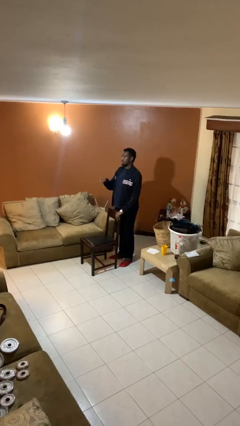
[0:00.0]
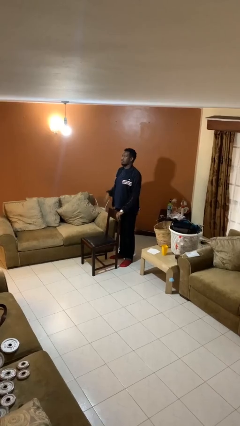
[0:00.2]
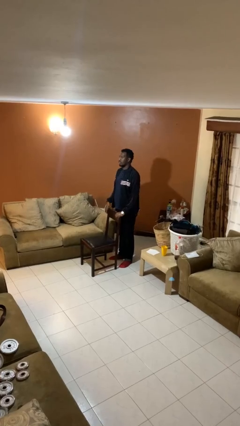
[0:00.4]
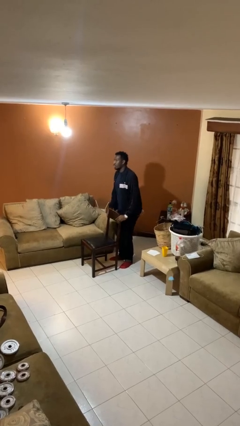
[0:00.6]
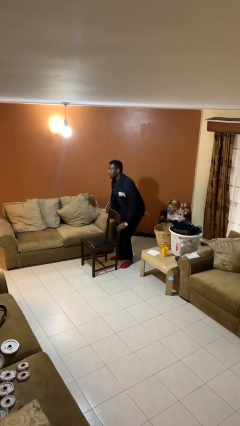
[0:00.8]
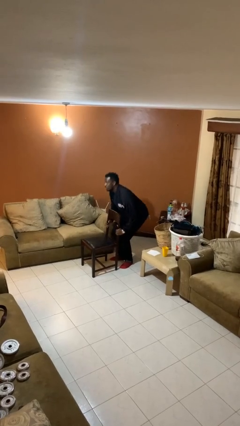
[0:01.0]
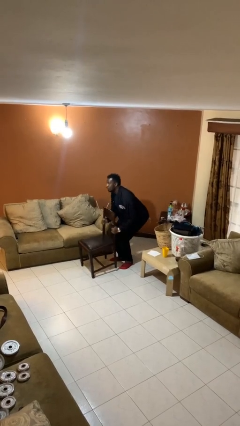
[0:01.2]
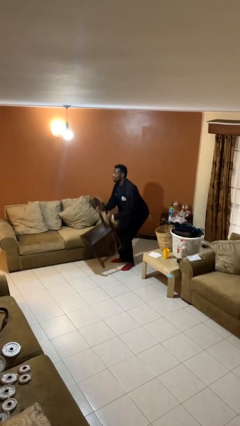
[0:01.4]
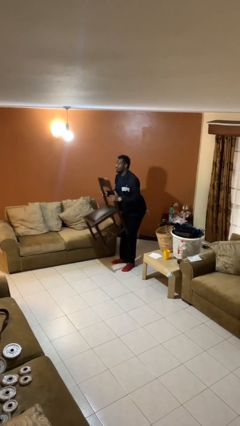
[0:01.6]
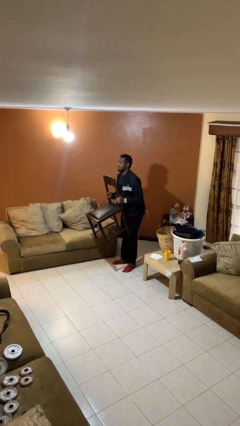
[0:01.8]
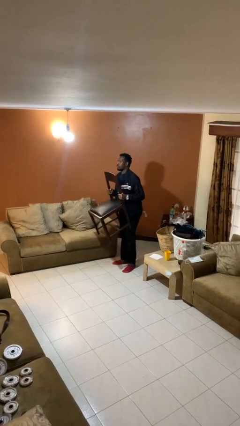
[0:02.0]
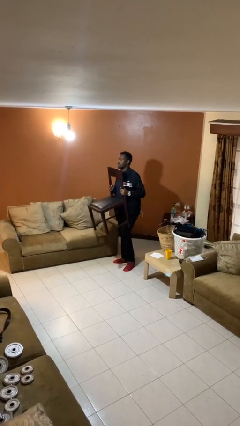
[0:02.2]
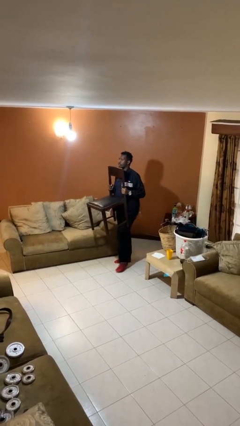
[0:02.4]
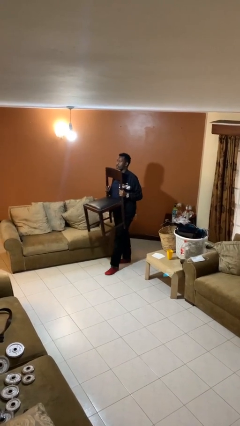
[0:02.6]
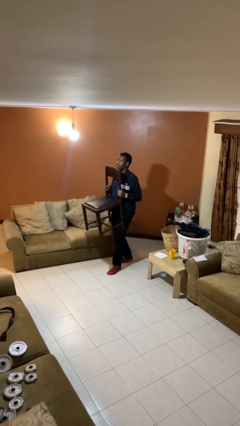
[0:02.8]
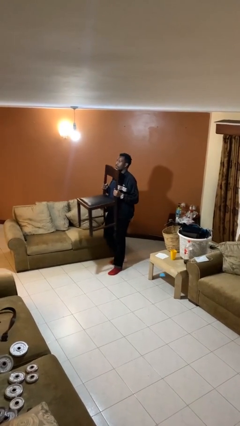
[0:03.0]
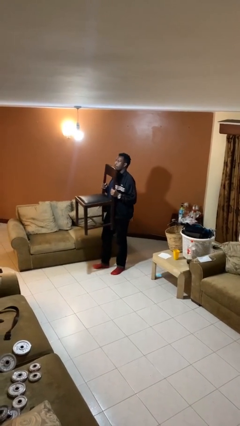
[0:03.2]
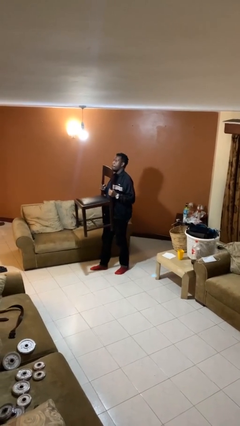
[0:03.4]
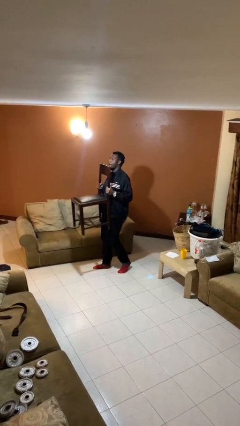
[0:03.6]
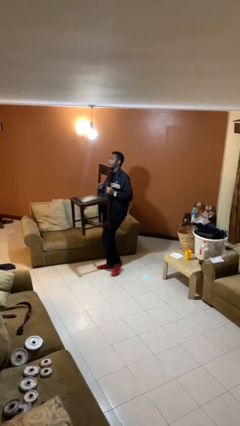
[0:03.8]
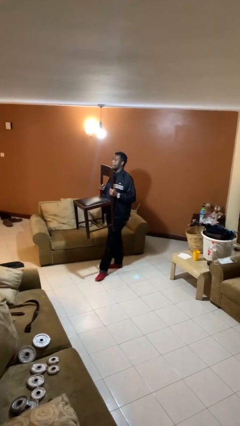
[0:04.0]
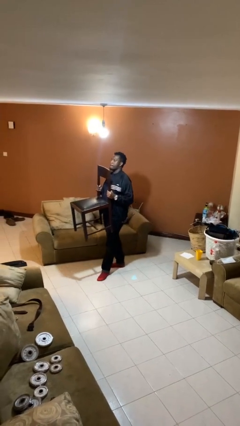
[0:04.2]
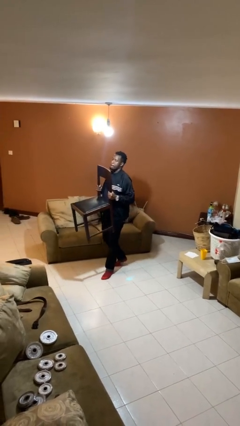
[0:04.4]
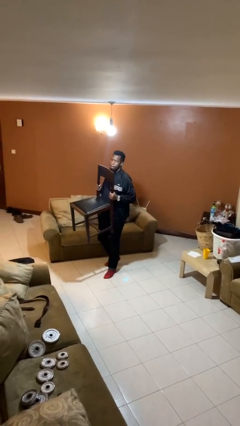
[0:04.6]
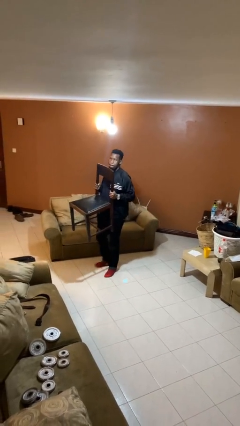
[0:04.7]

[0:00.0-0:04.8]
person carries furniture

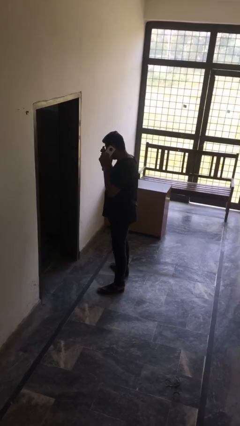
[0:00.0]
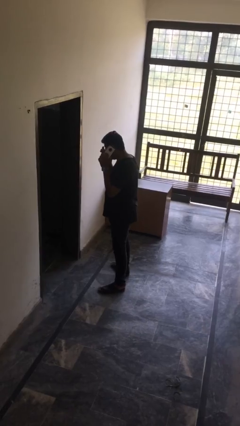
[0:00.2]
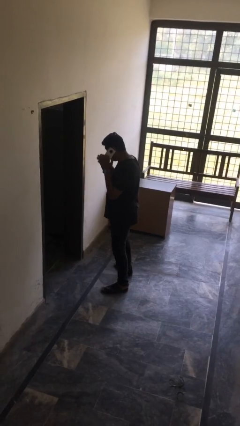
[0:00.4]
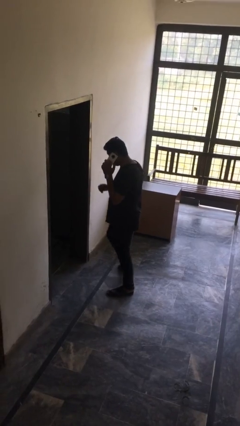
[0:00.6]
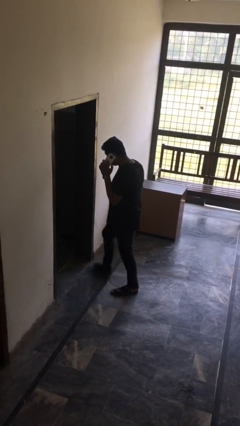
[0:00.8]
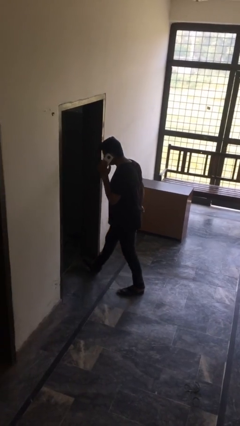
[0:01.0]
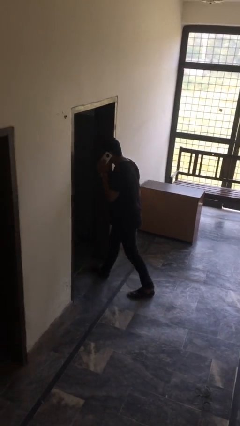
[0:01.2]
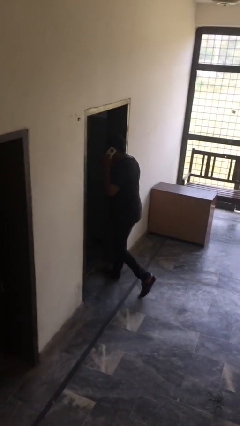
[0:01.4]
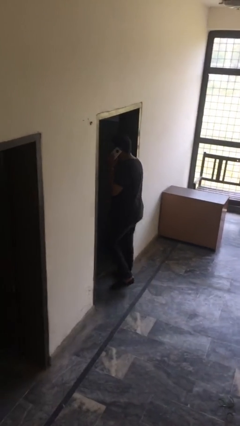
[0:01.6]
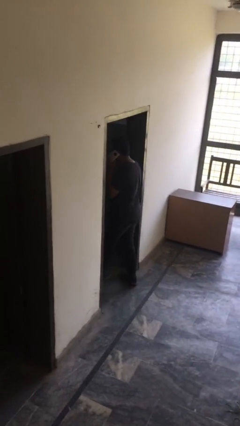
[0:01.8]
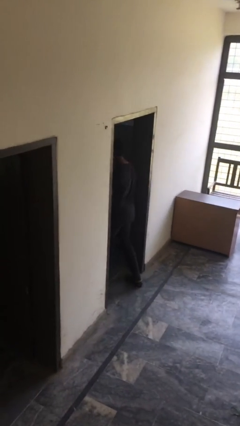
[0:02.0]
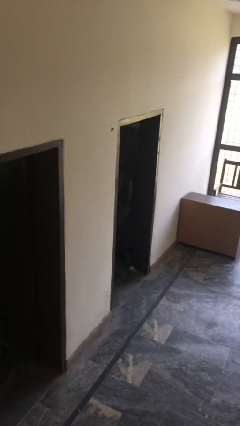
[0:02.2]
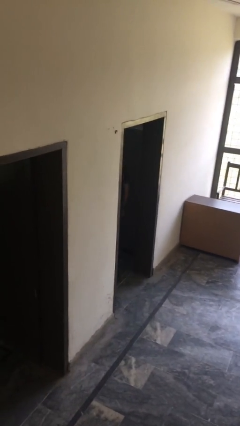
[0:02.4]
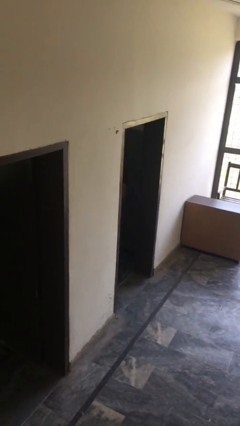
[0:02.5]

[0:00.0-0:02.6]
person exits scene through structure

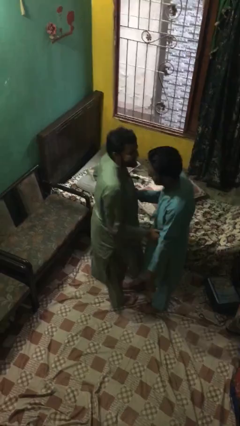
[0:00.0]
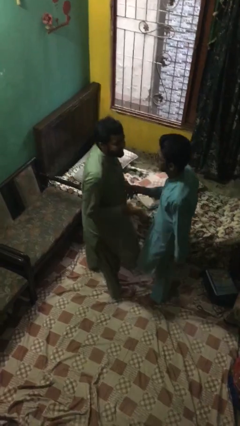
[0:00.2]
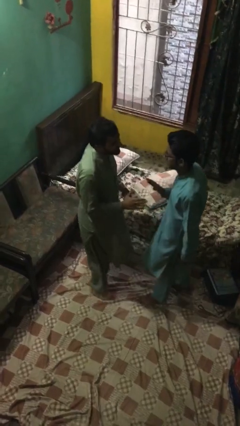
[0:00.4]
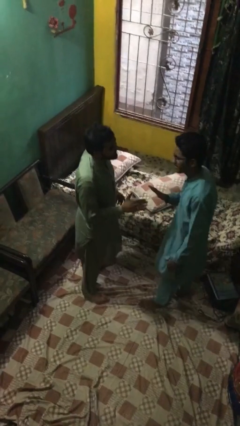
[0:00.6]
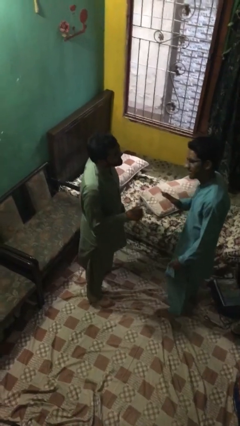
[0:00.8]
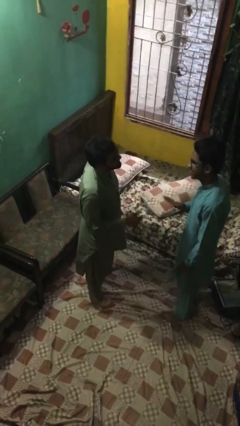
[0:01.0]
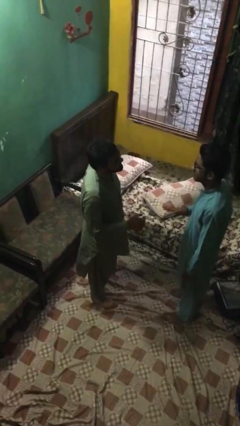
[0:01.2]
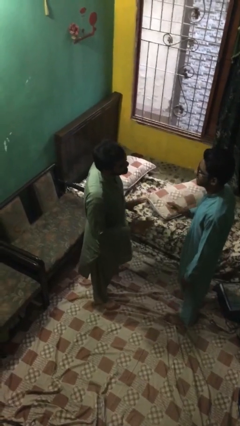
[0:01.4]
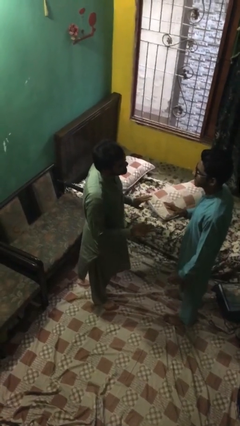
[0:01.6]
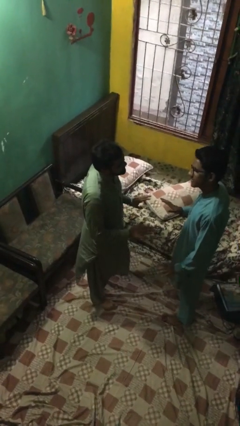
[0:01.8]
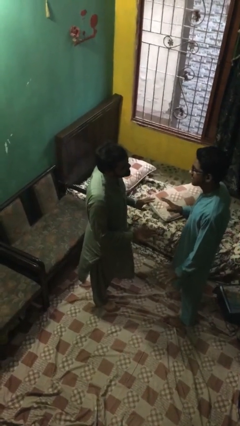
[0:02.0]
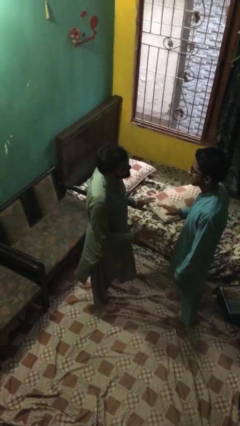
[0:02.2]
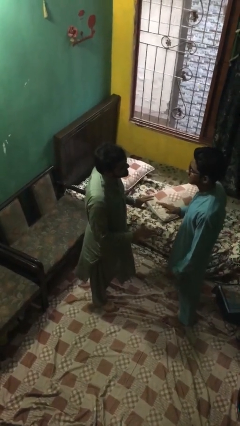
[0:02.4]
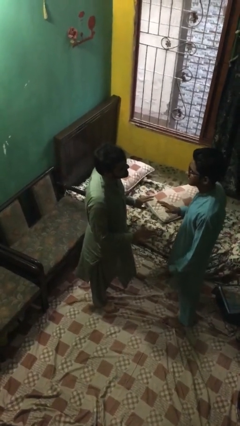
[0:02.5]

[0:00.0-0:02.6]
person talks to person

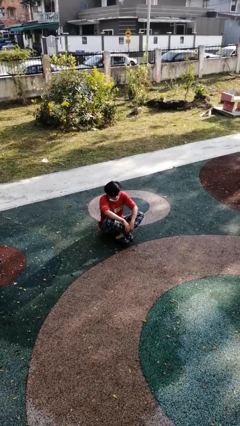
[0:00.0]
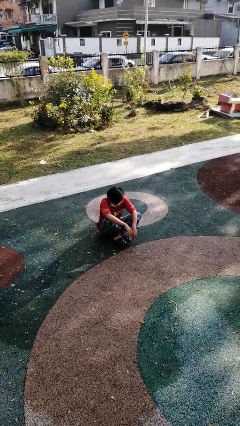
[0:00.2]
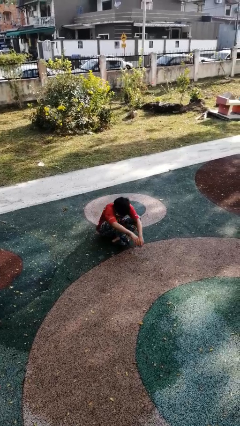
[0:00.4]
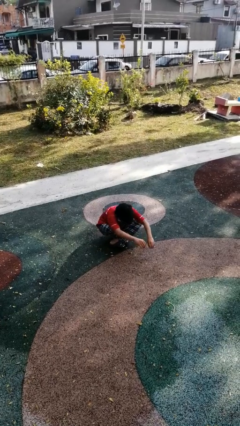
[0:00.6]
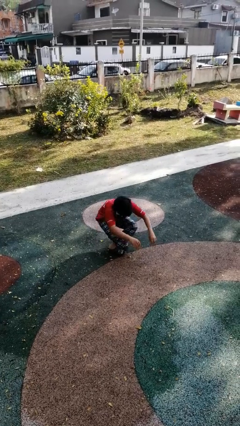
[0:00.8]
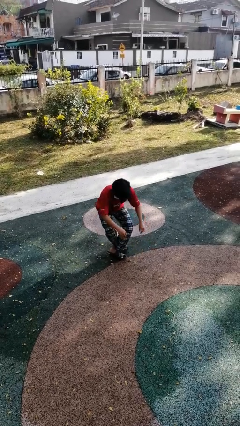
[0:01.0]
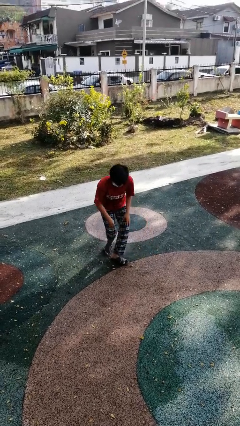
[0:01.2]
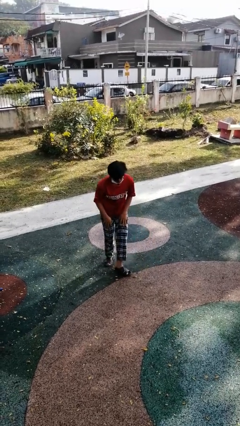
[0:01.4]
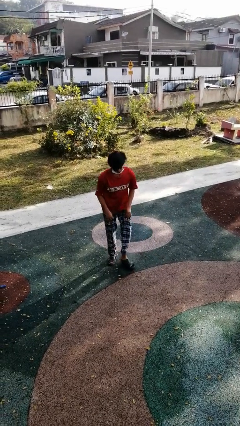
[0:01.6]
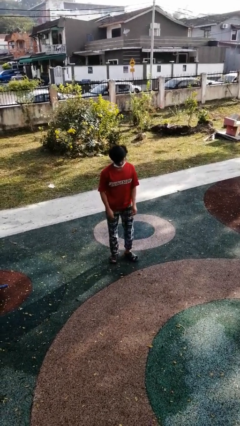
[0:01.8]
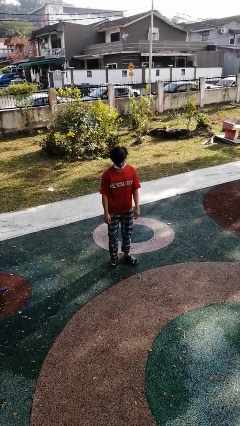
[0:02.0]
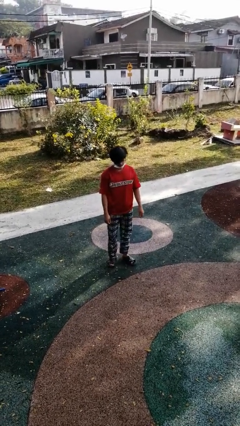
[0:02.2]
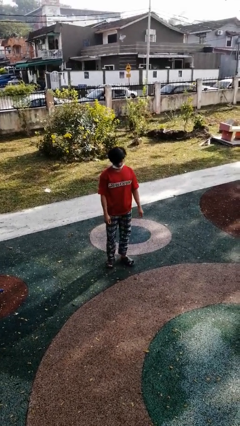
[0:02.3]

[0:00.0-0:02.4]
person stands up from floor

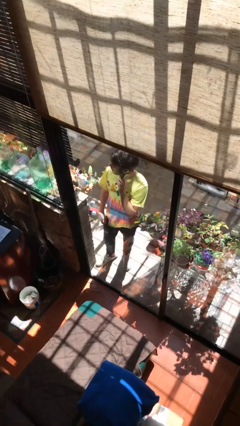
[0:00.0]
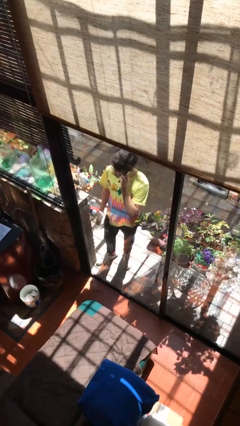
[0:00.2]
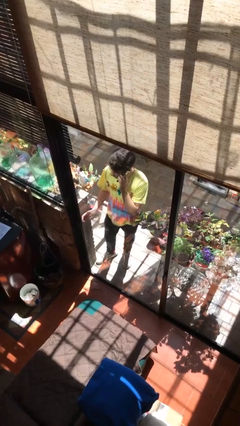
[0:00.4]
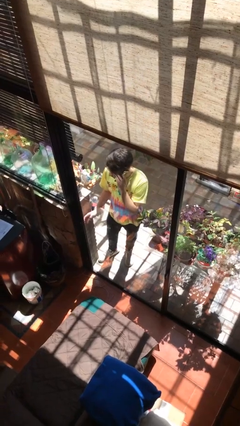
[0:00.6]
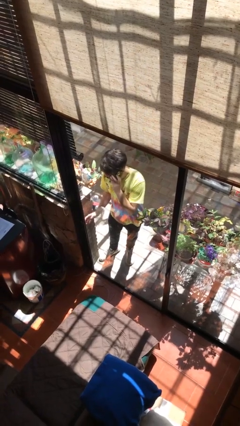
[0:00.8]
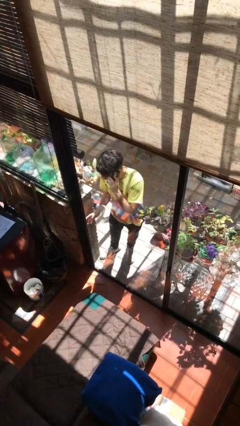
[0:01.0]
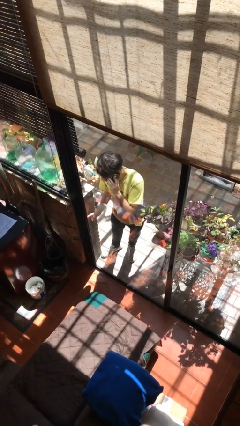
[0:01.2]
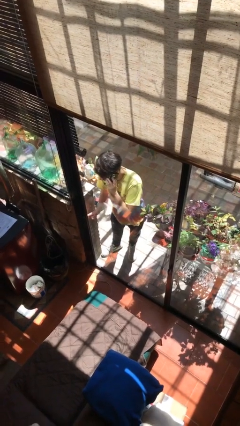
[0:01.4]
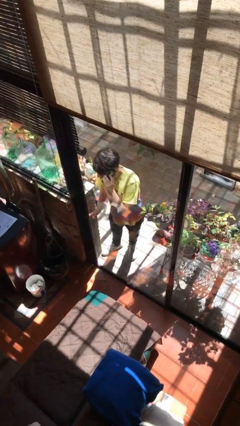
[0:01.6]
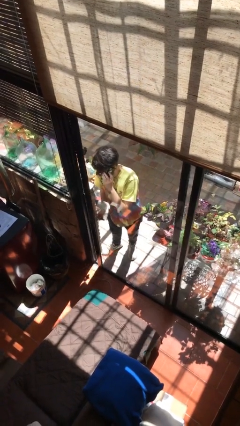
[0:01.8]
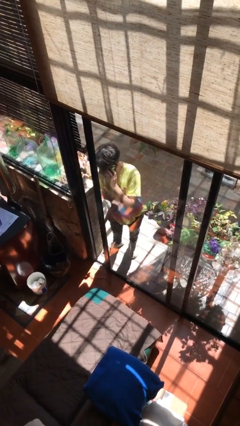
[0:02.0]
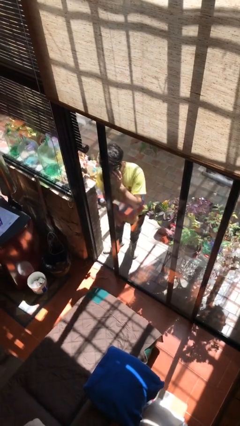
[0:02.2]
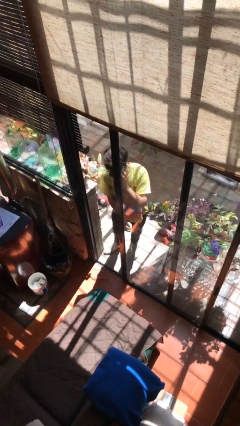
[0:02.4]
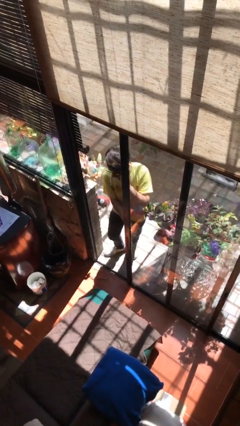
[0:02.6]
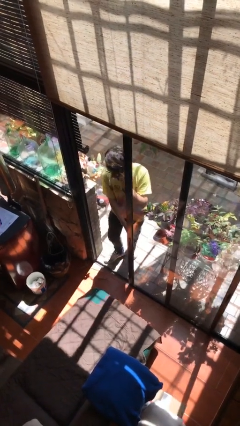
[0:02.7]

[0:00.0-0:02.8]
person opens facility door

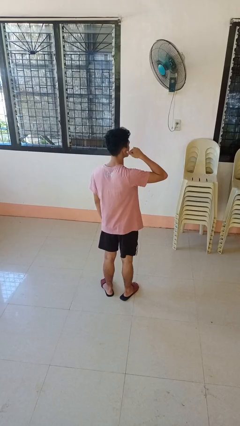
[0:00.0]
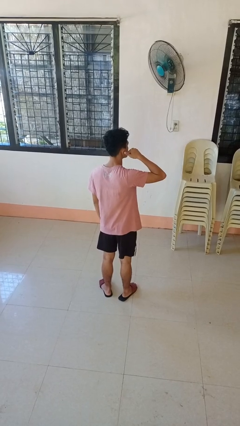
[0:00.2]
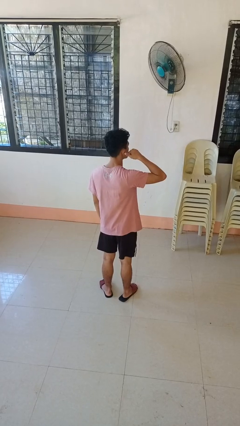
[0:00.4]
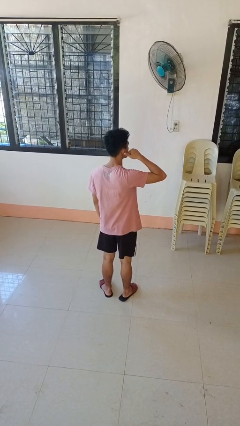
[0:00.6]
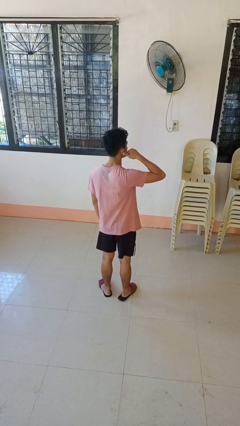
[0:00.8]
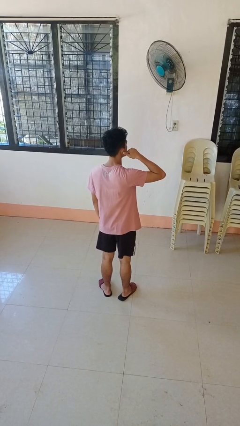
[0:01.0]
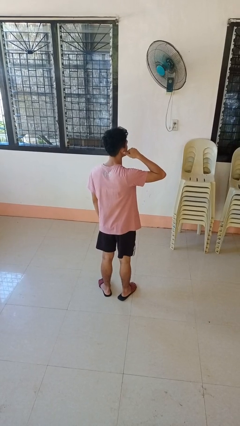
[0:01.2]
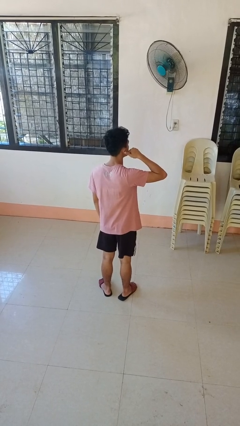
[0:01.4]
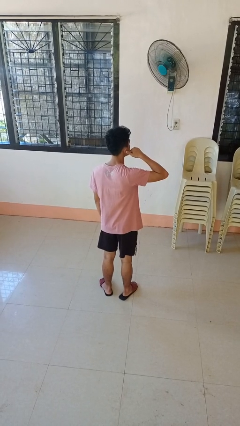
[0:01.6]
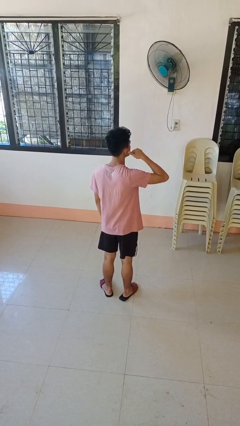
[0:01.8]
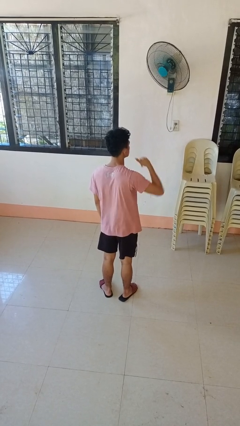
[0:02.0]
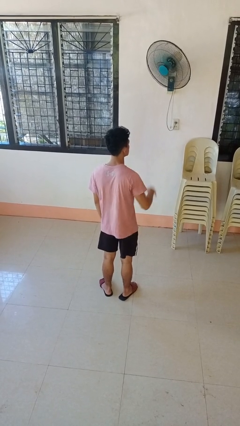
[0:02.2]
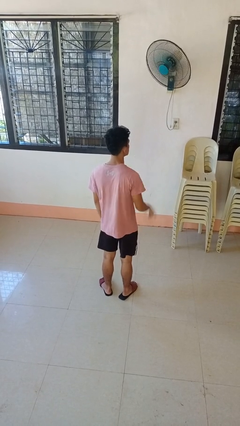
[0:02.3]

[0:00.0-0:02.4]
person gestures call me
